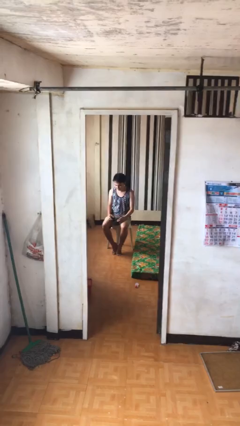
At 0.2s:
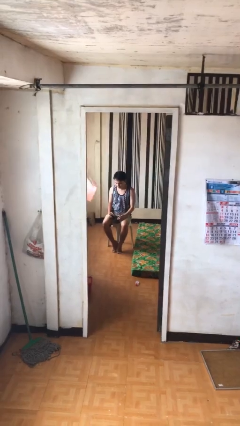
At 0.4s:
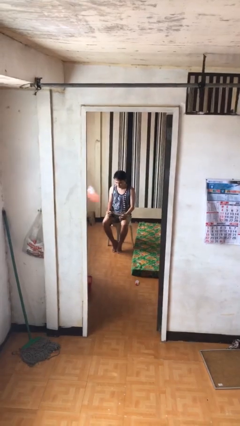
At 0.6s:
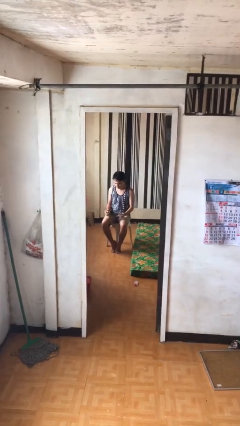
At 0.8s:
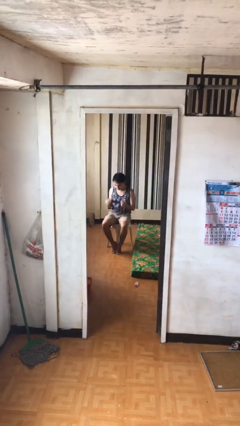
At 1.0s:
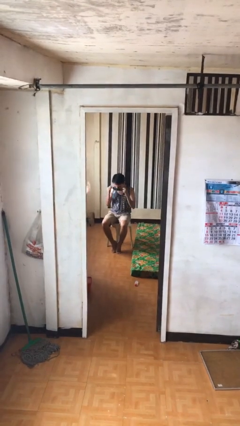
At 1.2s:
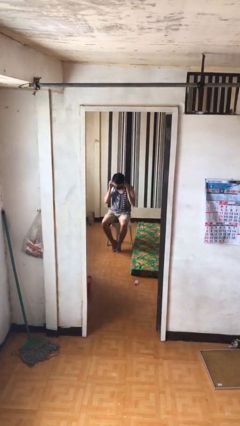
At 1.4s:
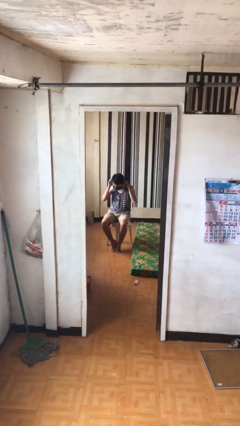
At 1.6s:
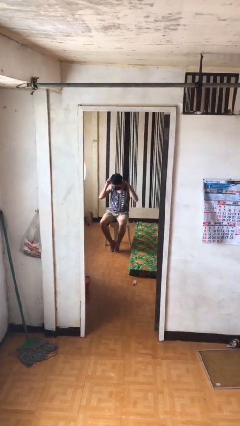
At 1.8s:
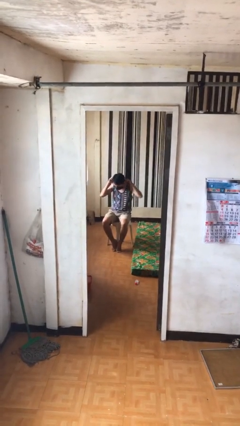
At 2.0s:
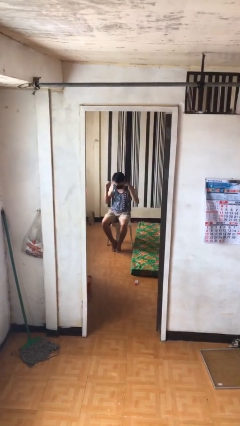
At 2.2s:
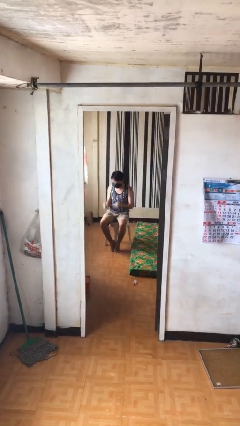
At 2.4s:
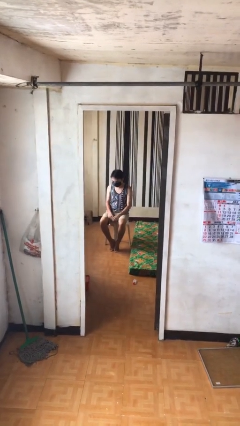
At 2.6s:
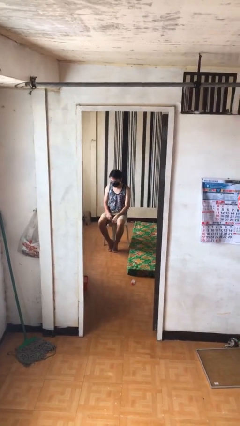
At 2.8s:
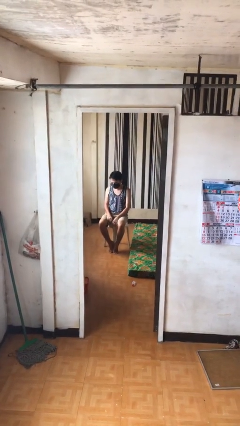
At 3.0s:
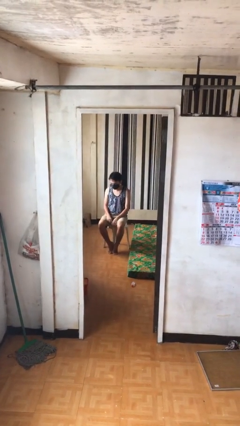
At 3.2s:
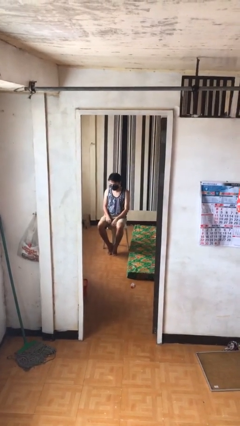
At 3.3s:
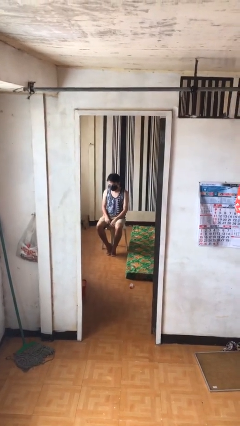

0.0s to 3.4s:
person puts on facemask

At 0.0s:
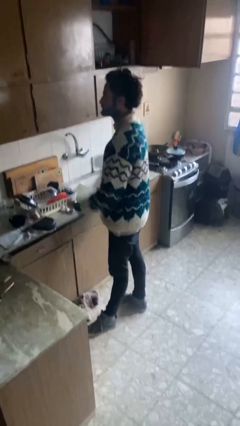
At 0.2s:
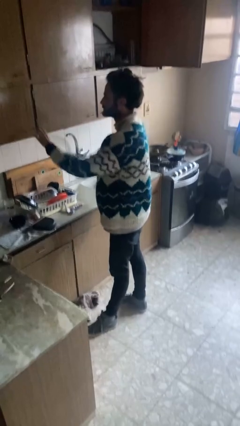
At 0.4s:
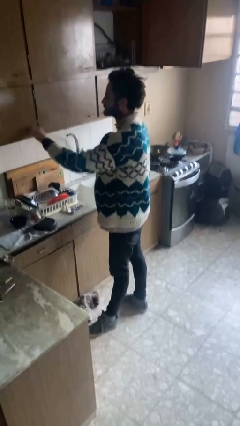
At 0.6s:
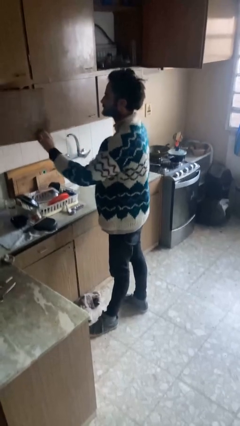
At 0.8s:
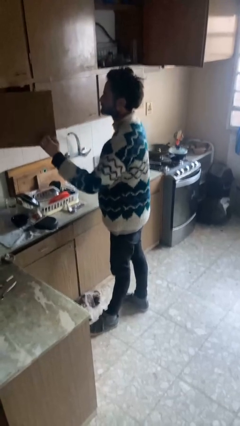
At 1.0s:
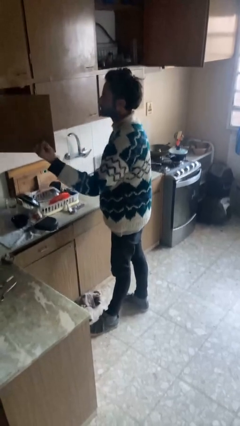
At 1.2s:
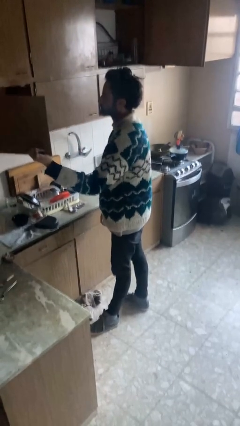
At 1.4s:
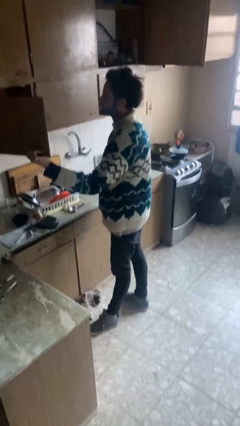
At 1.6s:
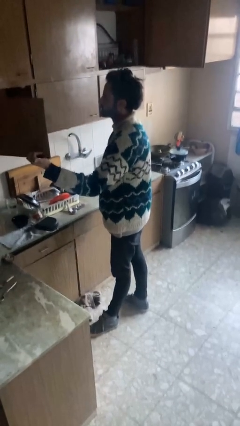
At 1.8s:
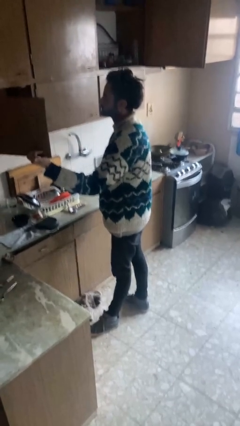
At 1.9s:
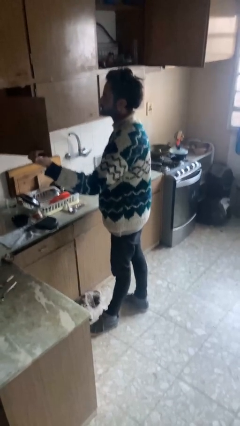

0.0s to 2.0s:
person opens cabinet

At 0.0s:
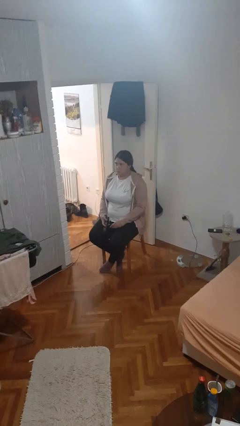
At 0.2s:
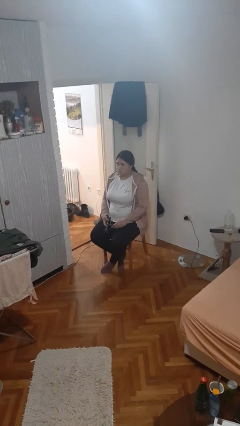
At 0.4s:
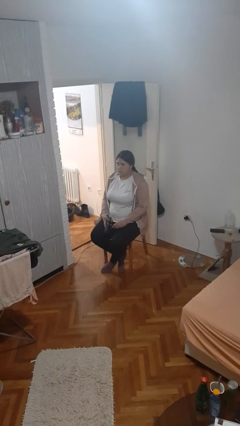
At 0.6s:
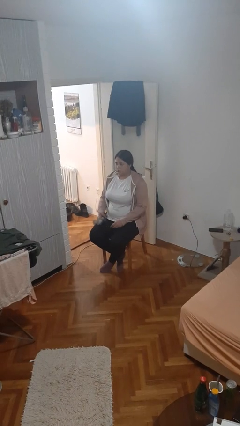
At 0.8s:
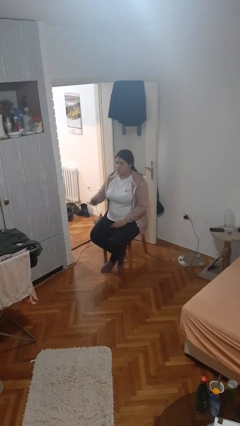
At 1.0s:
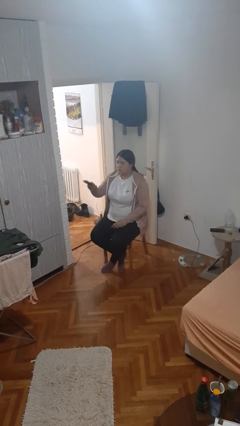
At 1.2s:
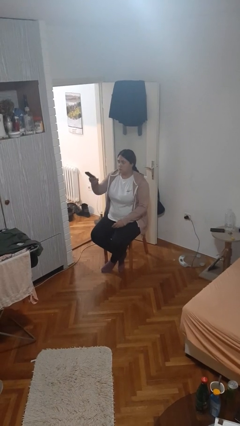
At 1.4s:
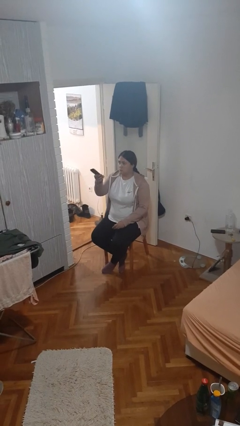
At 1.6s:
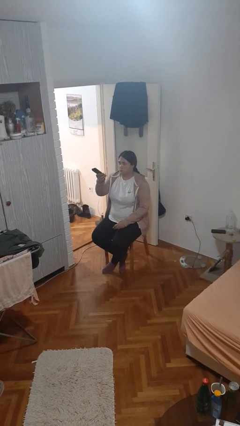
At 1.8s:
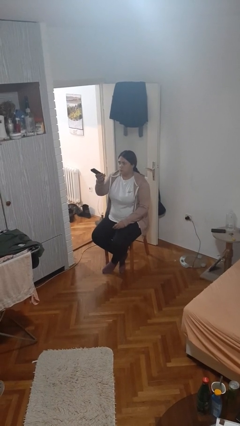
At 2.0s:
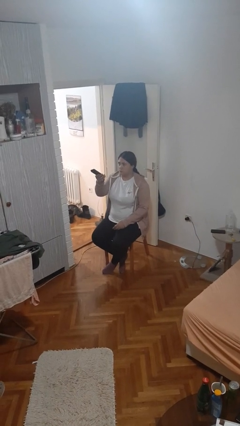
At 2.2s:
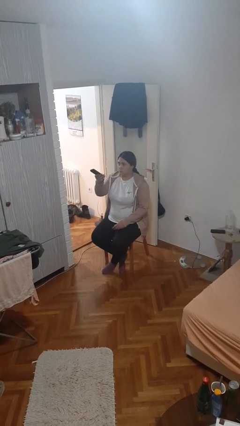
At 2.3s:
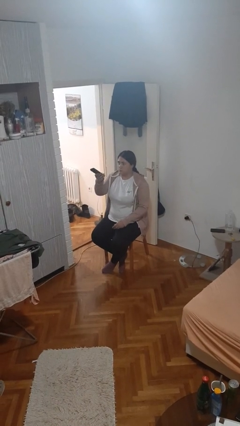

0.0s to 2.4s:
person uses television remote

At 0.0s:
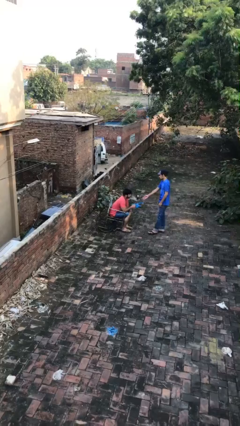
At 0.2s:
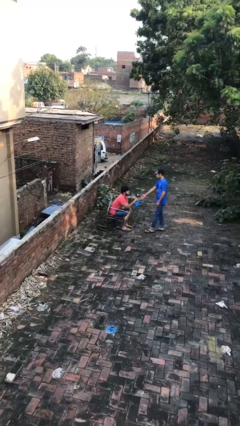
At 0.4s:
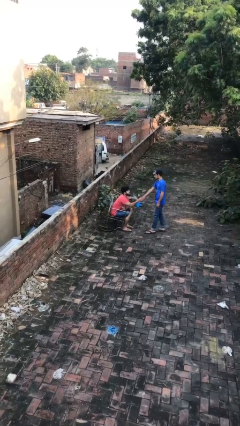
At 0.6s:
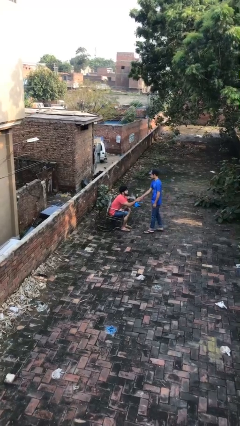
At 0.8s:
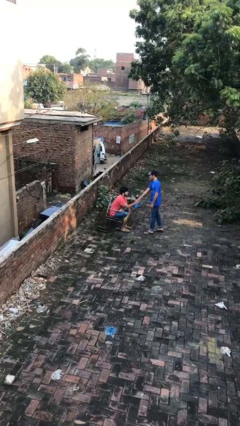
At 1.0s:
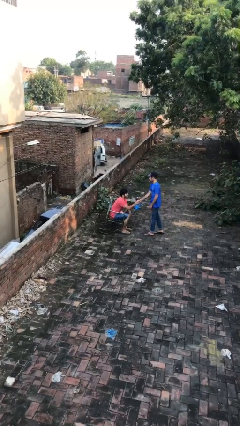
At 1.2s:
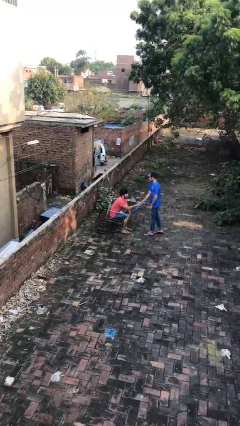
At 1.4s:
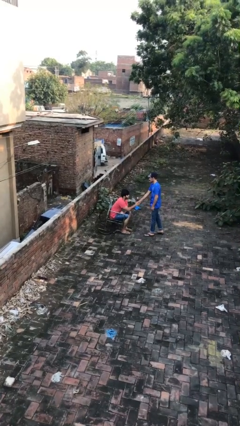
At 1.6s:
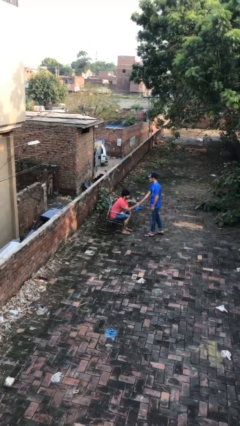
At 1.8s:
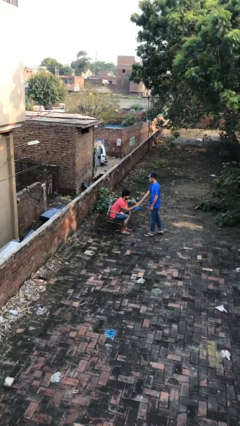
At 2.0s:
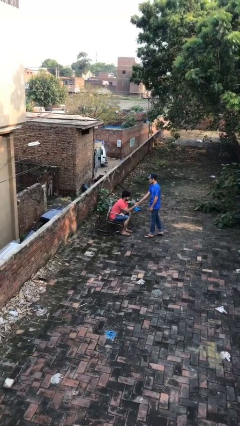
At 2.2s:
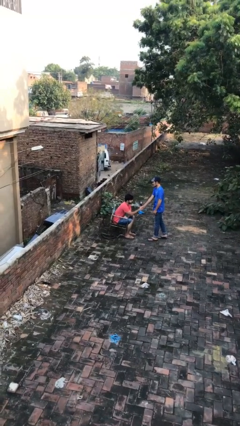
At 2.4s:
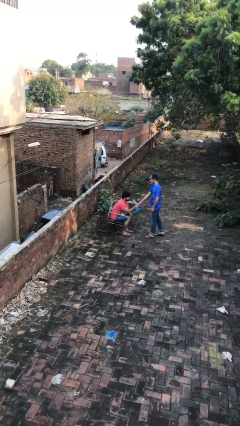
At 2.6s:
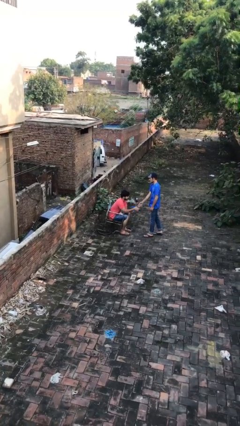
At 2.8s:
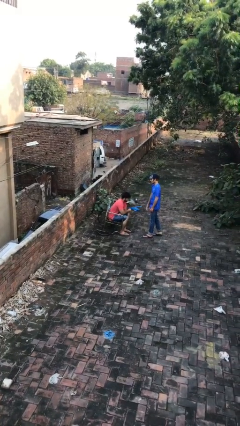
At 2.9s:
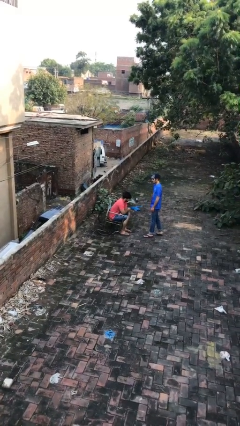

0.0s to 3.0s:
person shakes hand

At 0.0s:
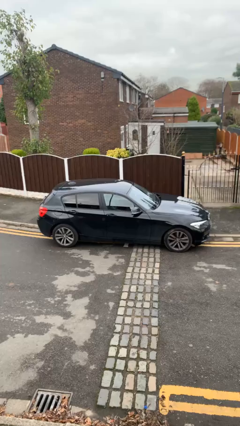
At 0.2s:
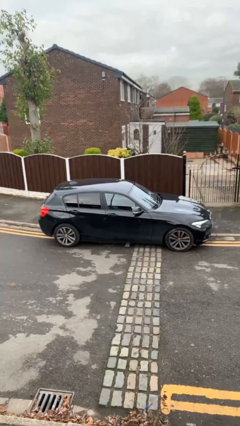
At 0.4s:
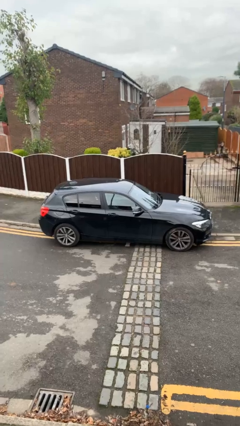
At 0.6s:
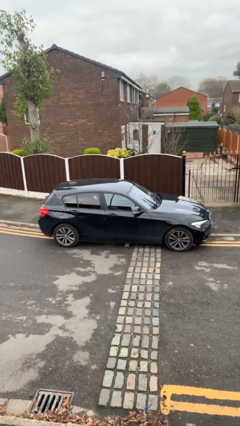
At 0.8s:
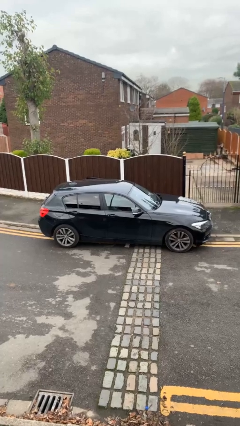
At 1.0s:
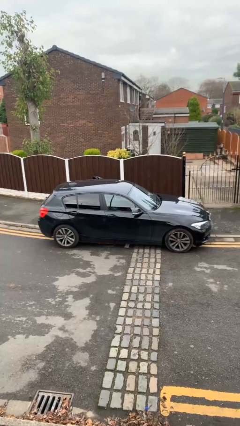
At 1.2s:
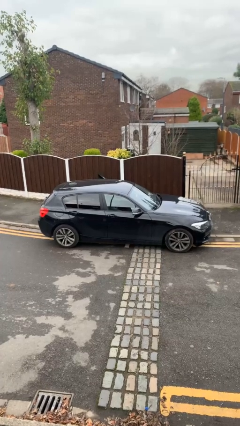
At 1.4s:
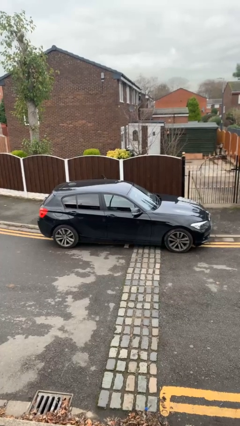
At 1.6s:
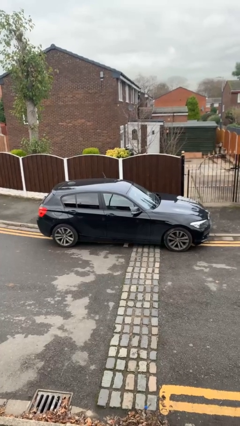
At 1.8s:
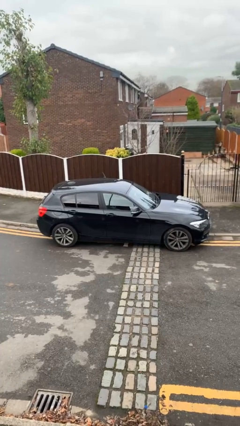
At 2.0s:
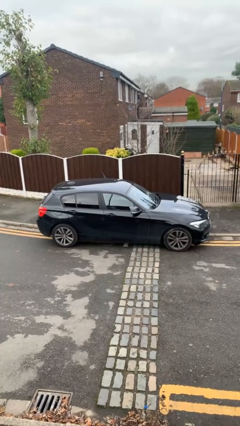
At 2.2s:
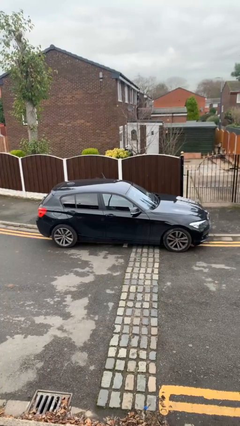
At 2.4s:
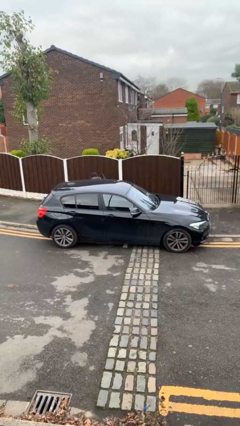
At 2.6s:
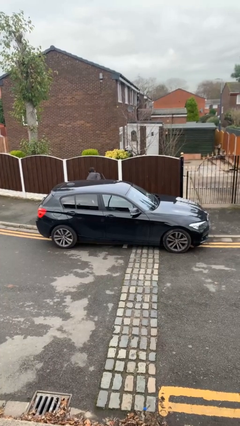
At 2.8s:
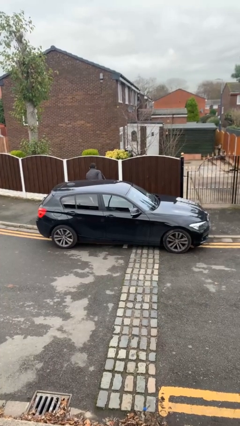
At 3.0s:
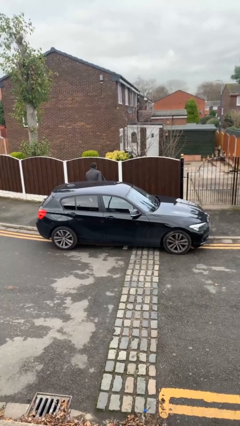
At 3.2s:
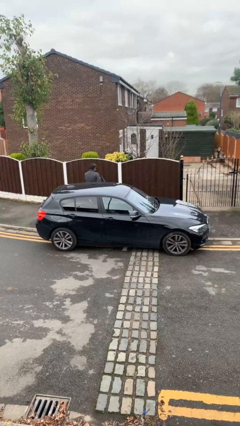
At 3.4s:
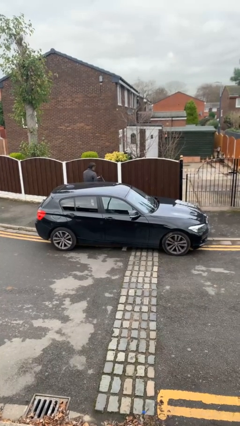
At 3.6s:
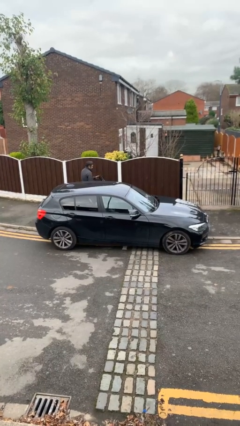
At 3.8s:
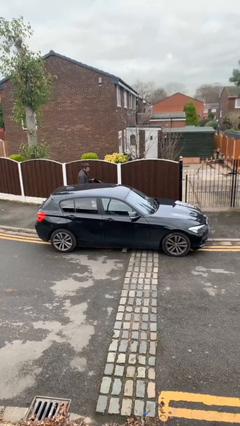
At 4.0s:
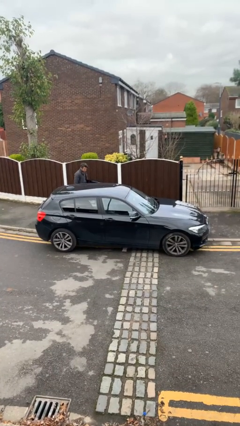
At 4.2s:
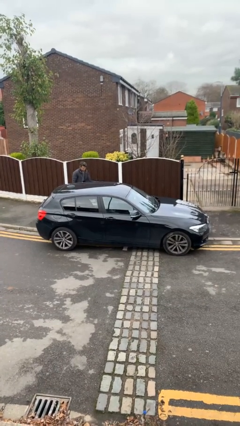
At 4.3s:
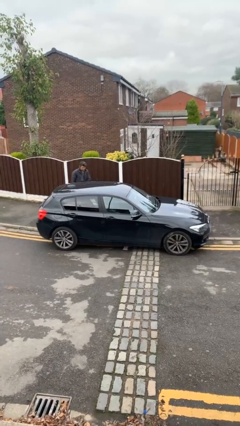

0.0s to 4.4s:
car drops off person

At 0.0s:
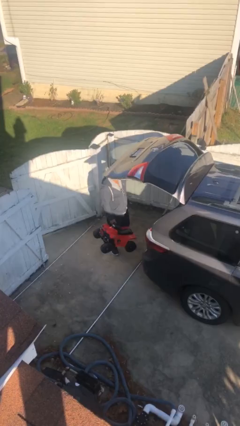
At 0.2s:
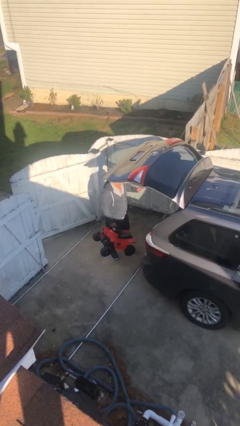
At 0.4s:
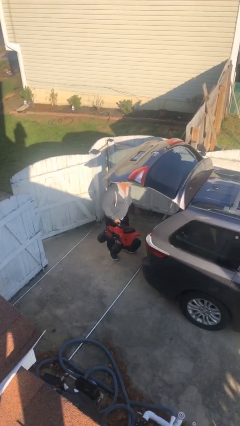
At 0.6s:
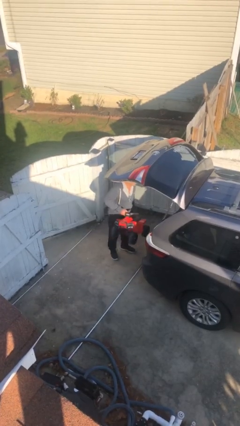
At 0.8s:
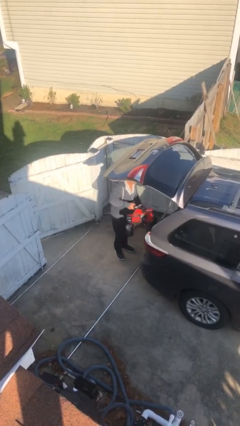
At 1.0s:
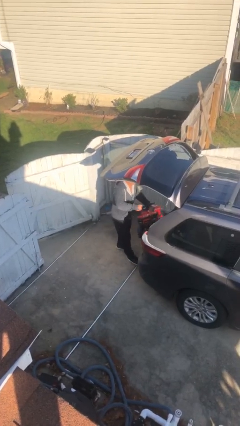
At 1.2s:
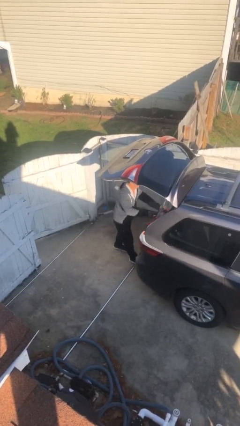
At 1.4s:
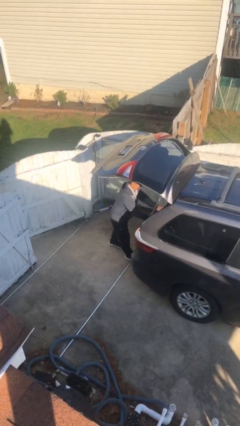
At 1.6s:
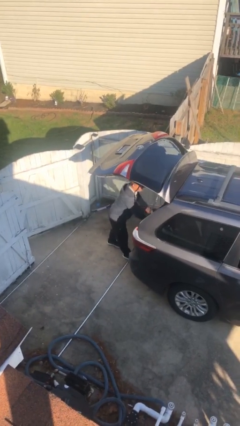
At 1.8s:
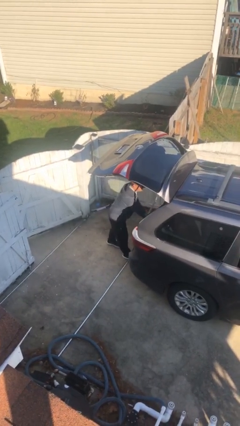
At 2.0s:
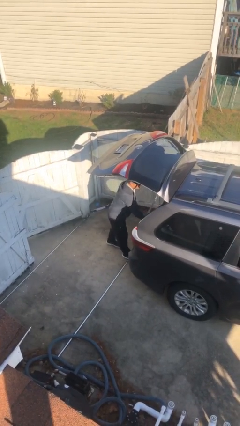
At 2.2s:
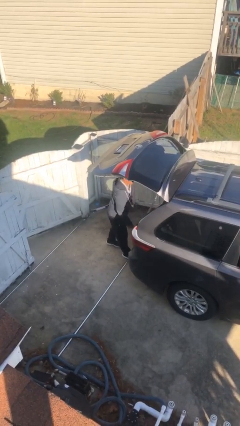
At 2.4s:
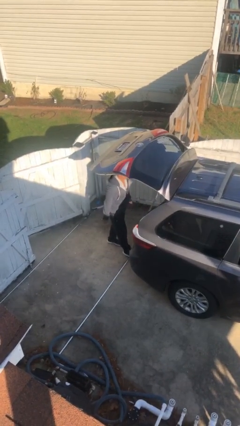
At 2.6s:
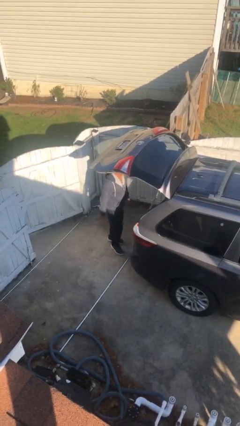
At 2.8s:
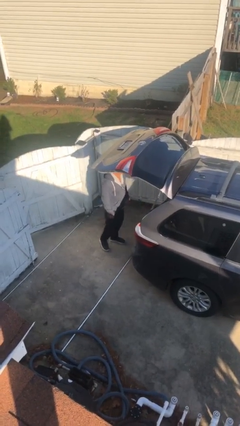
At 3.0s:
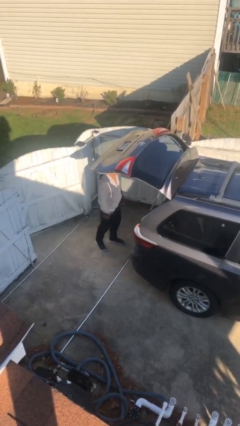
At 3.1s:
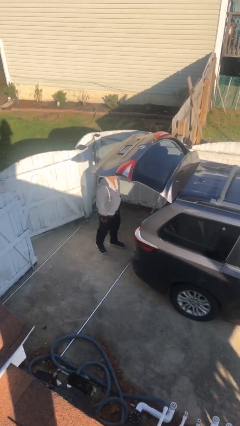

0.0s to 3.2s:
person loads car
